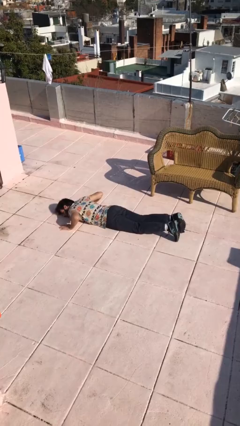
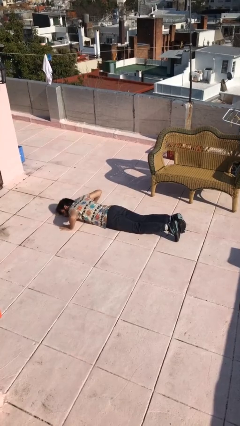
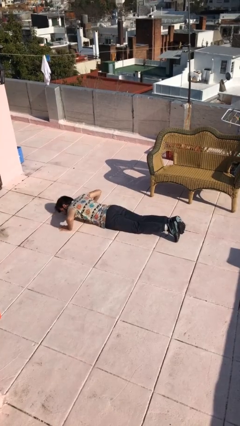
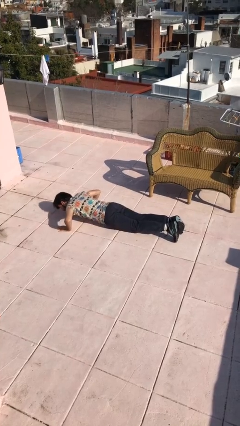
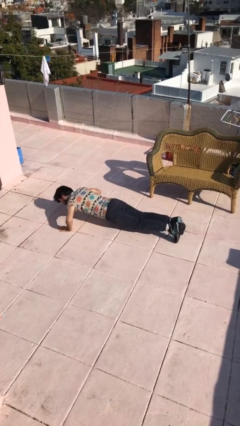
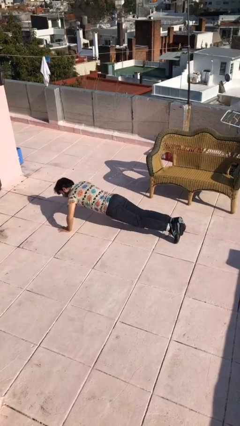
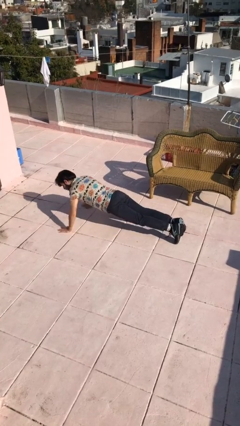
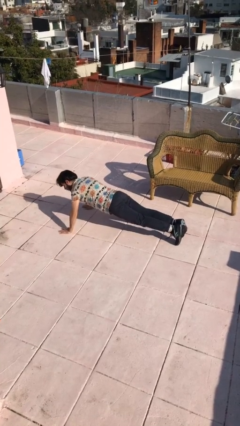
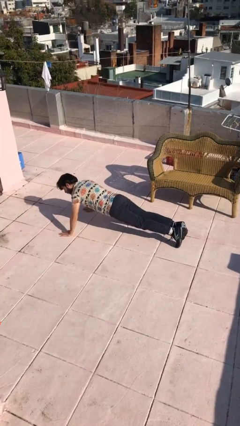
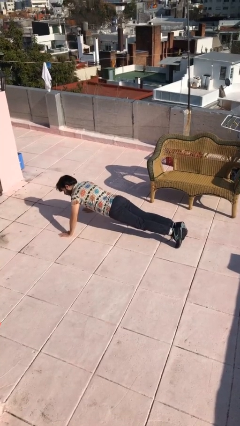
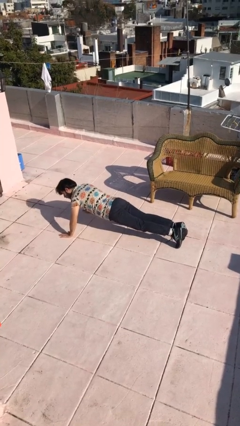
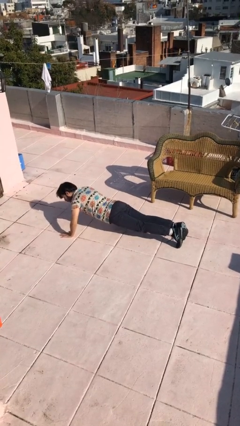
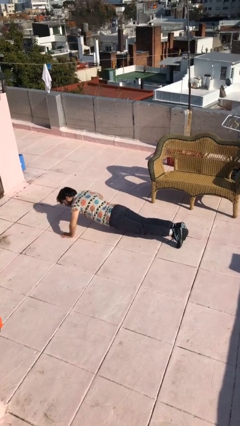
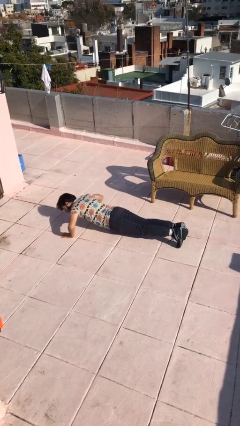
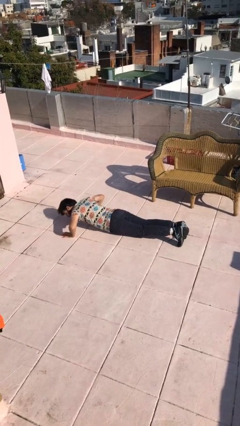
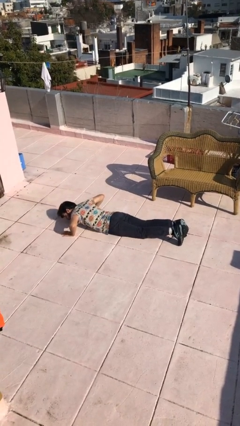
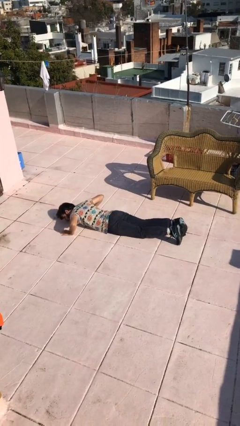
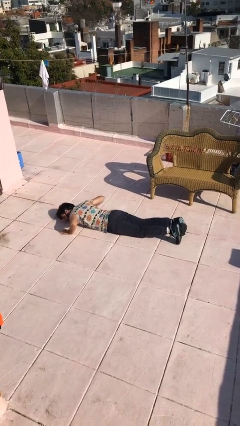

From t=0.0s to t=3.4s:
person exercises with pushup

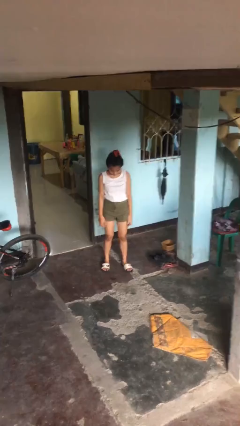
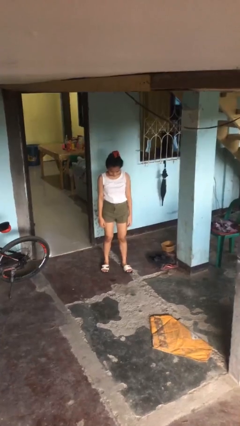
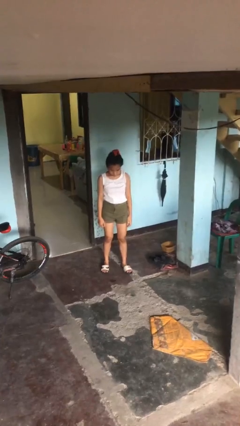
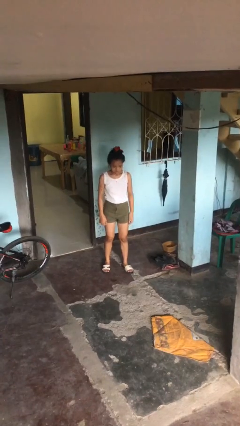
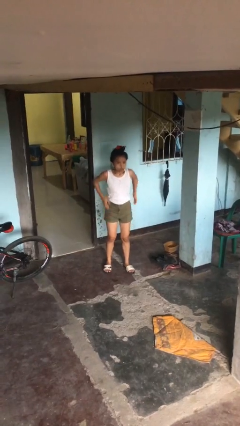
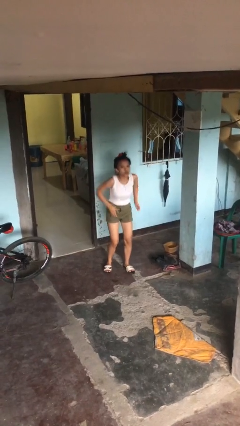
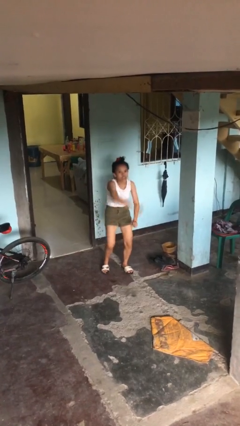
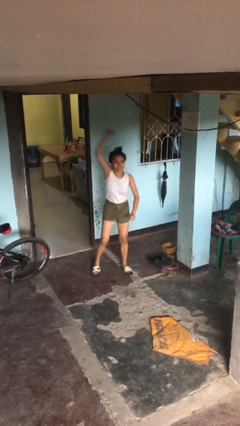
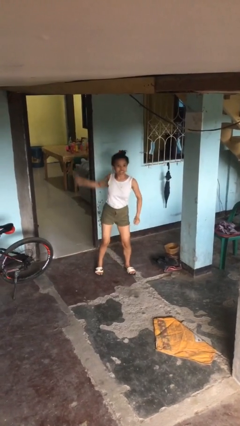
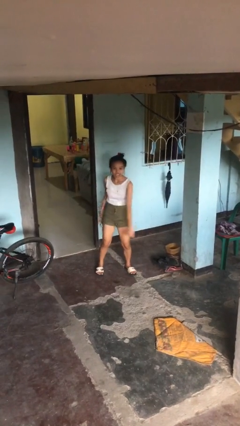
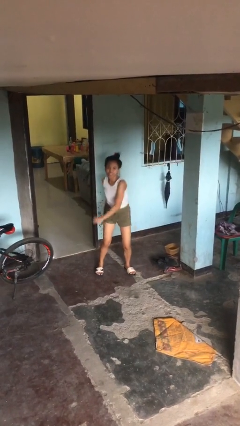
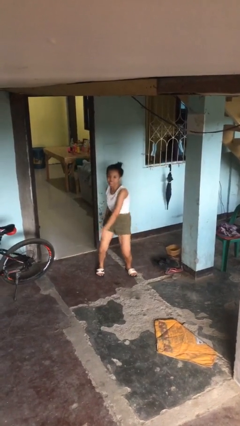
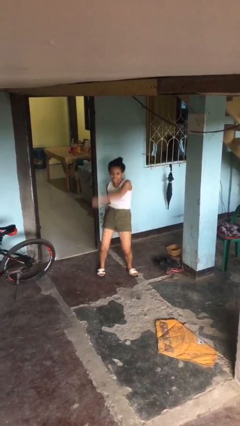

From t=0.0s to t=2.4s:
person dances in place

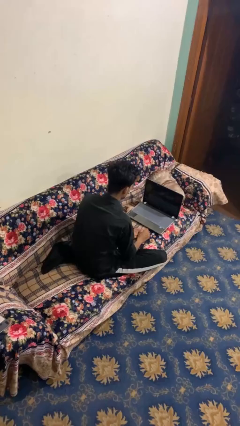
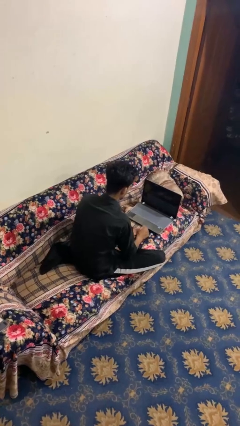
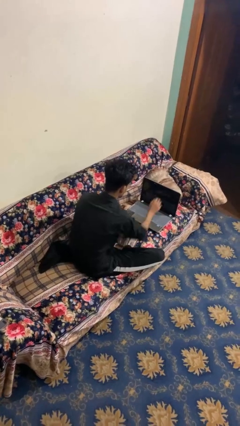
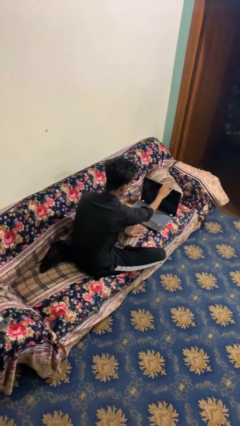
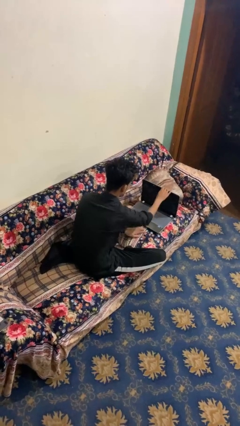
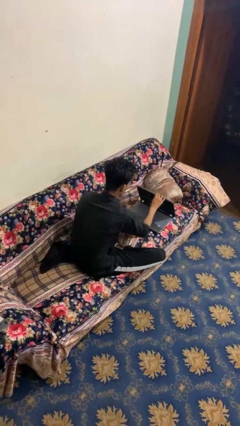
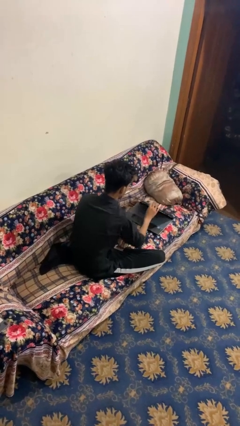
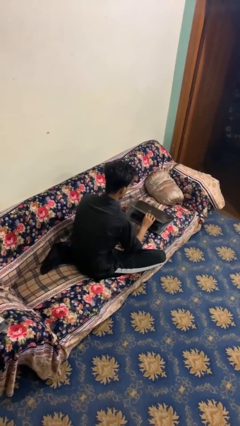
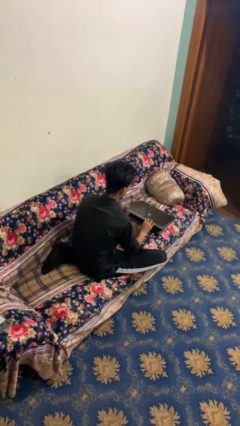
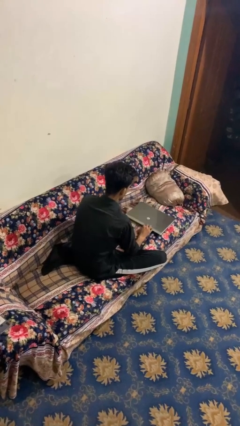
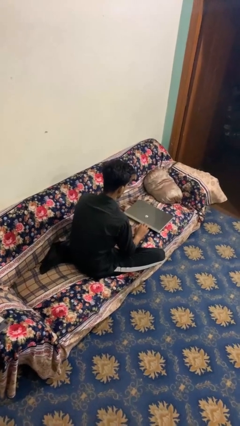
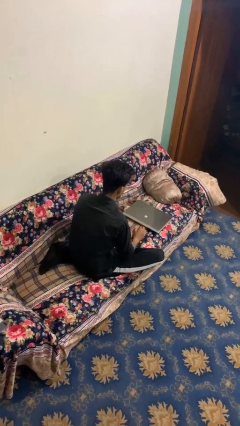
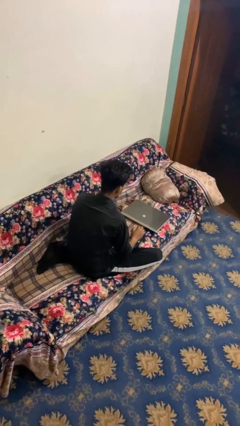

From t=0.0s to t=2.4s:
person closes laptop

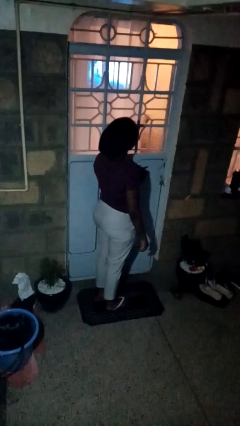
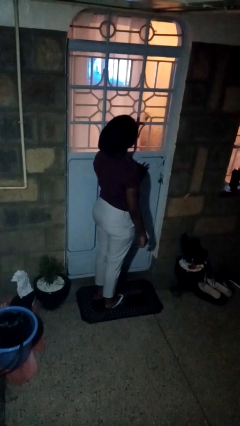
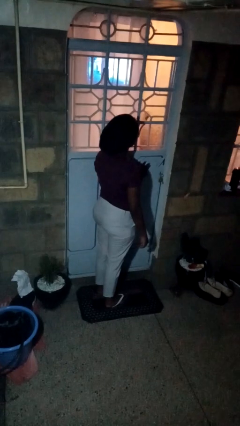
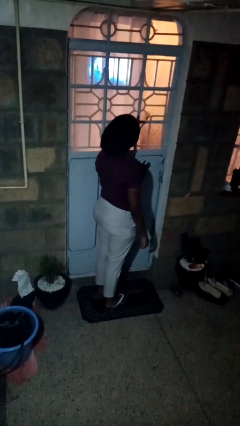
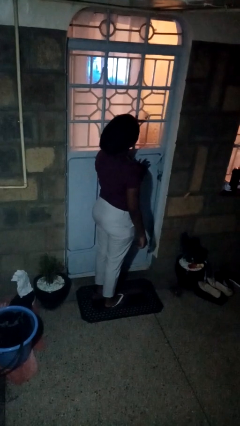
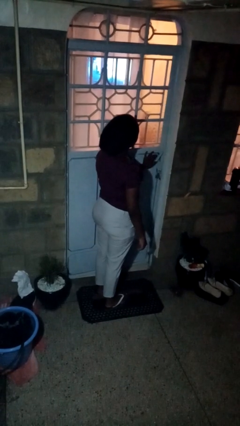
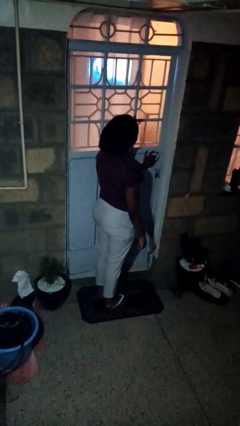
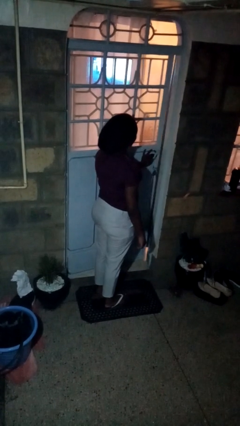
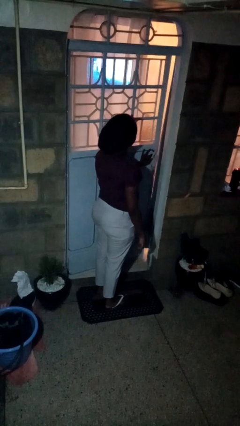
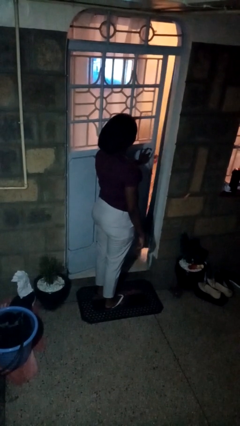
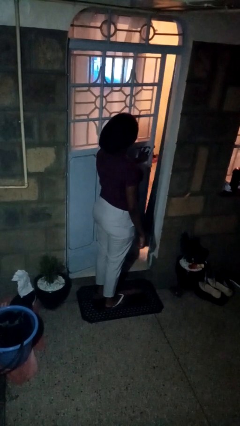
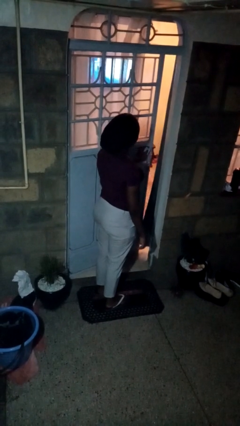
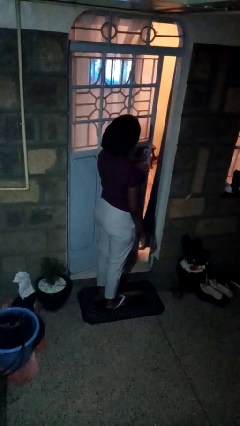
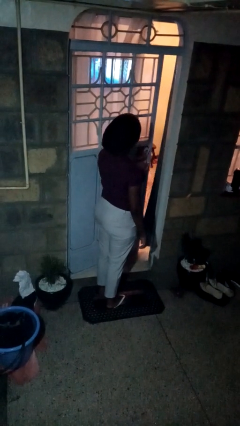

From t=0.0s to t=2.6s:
person opens facility door

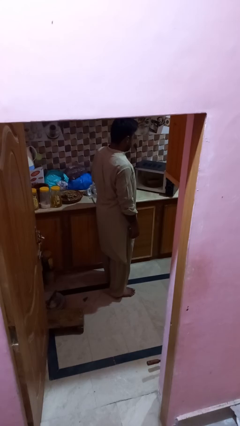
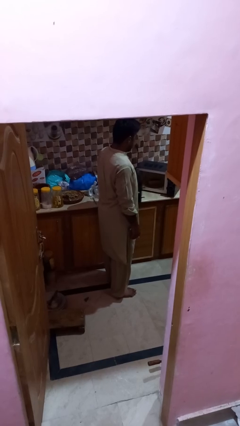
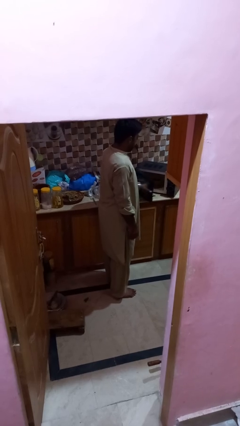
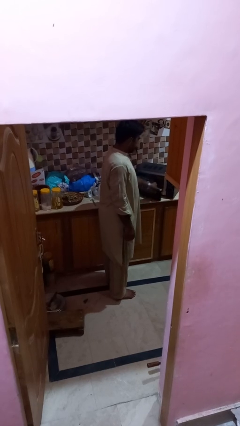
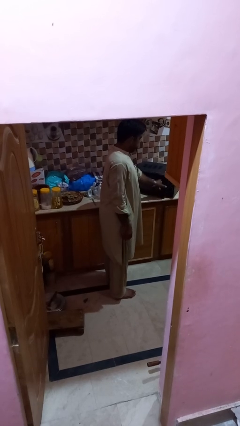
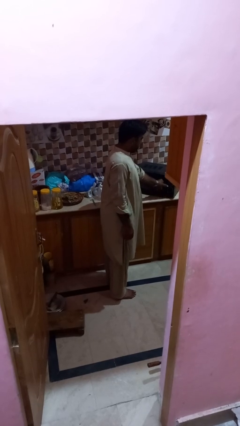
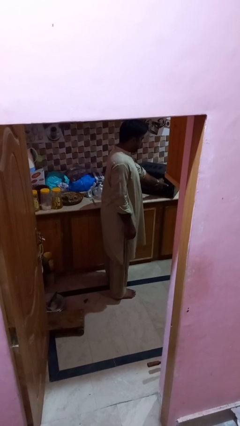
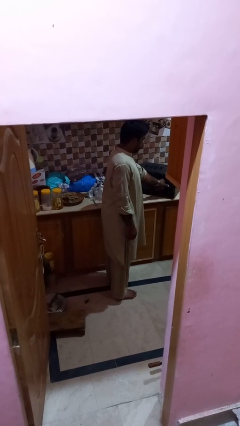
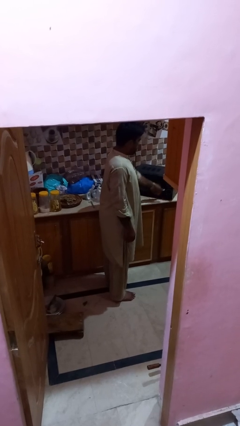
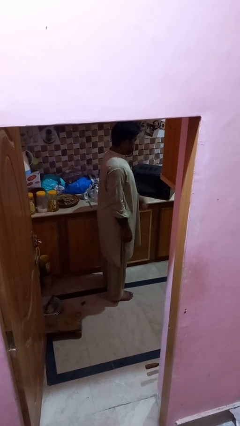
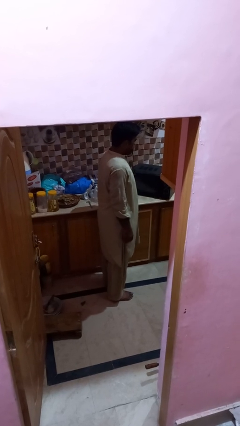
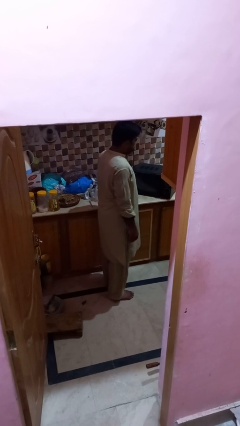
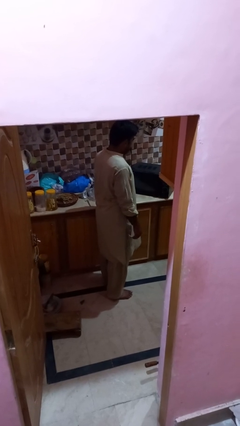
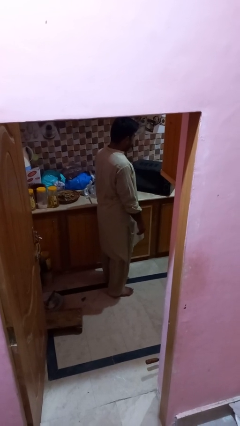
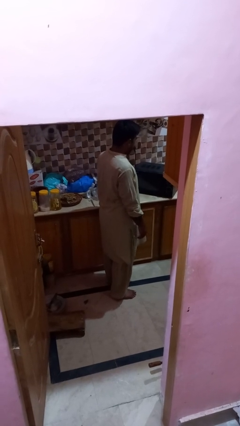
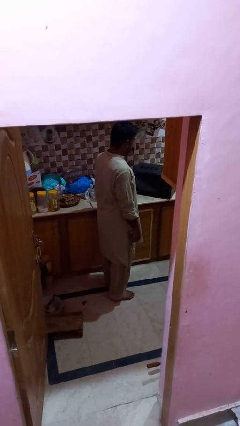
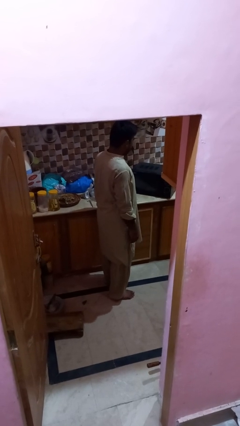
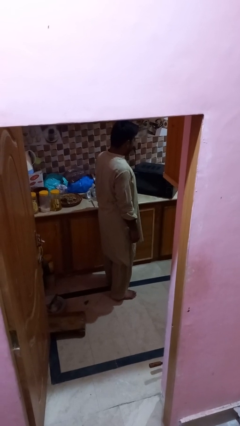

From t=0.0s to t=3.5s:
person closes microwave

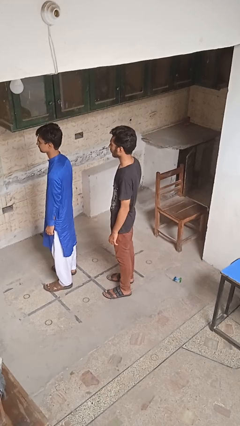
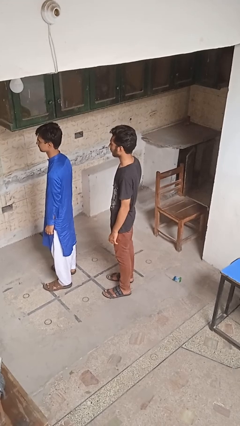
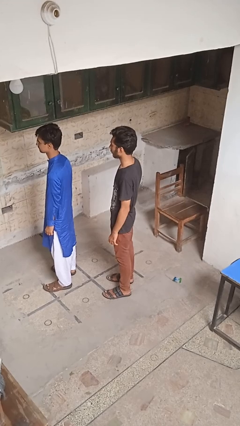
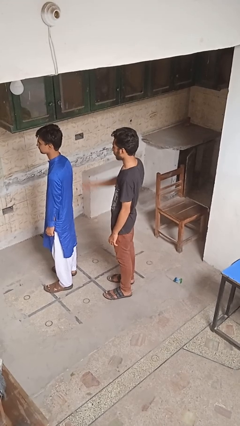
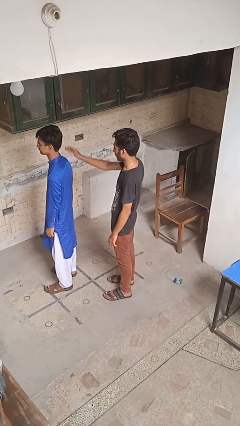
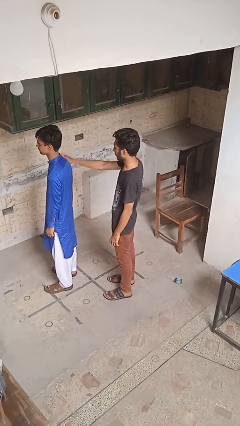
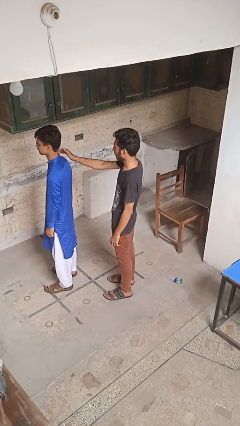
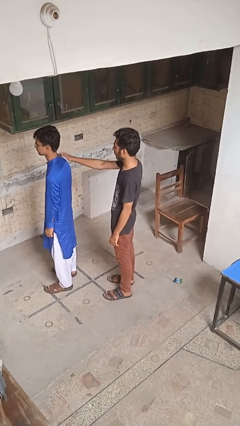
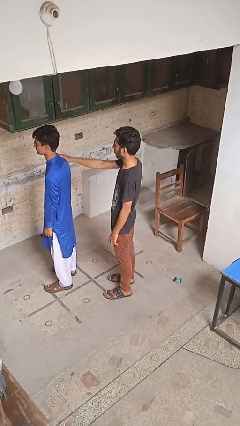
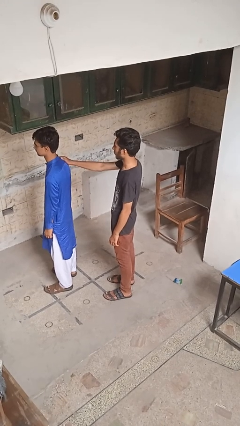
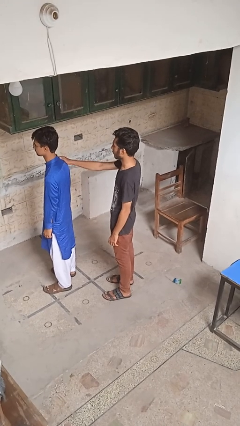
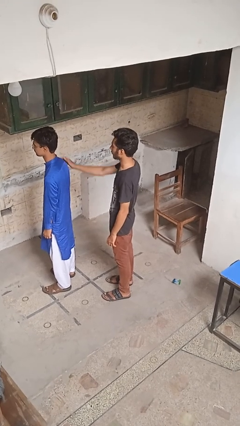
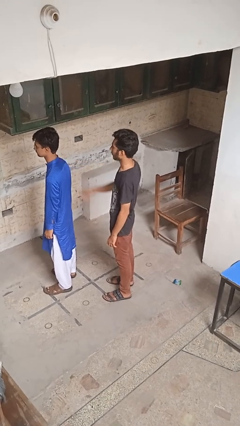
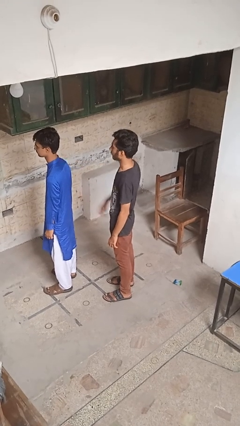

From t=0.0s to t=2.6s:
person touches back of person
